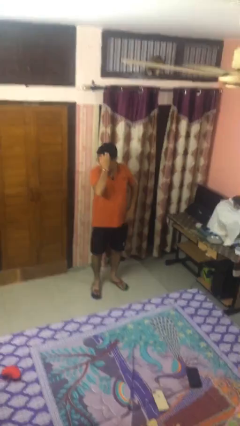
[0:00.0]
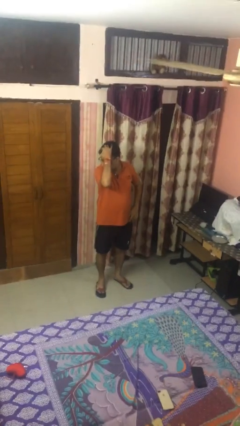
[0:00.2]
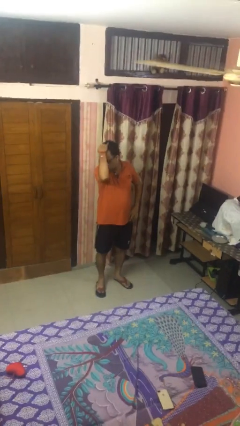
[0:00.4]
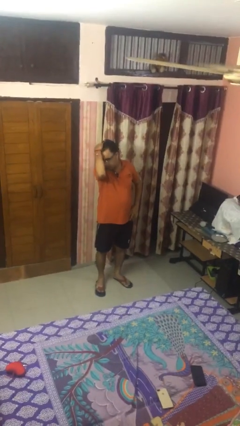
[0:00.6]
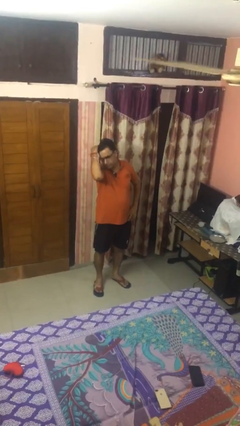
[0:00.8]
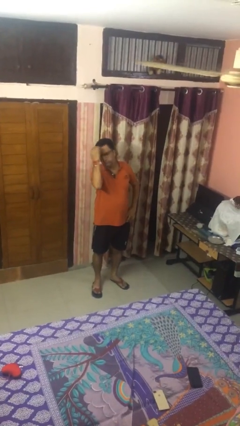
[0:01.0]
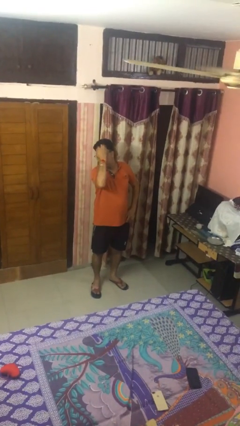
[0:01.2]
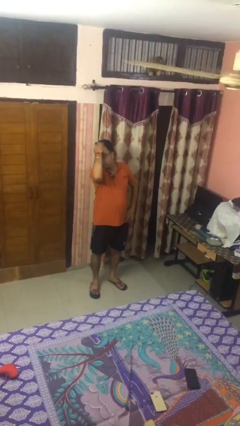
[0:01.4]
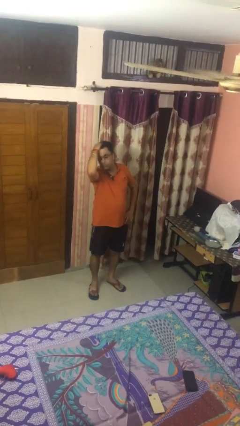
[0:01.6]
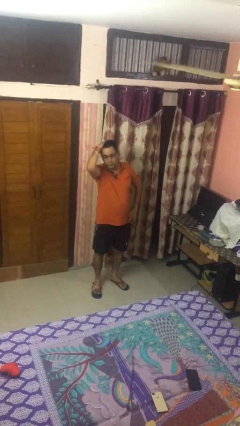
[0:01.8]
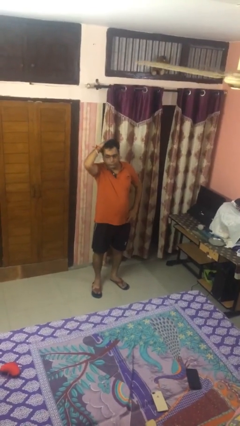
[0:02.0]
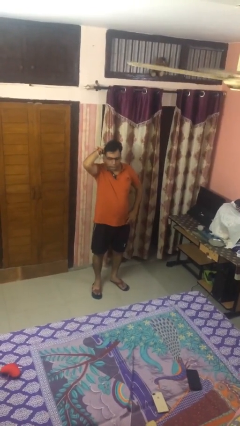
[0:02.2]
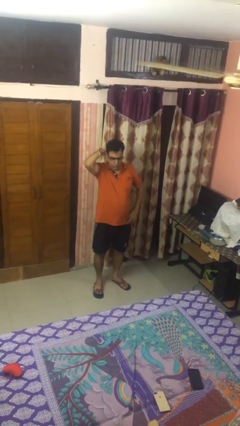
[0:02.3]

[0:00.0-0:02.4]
person strokes hair

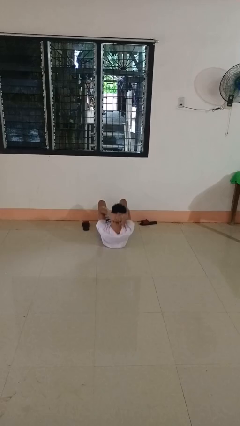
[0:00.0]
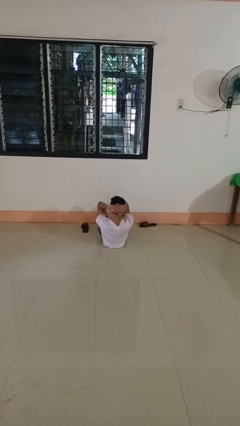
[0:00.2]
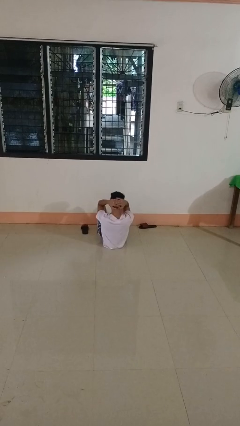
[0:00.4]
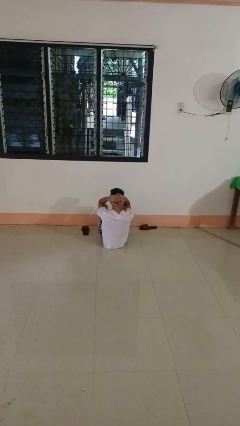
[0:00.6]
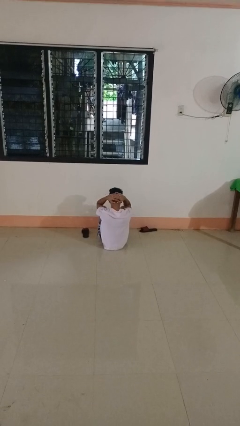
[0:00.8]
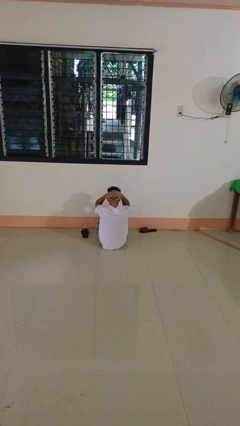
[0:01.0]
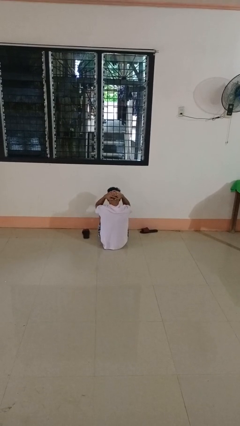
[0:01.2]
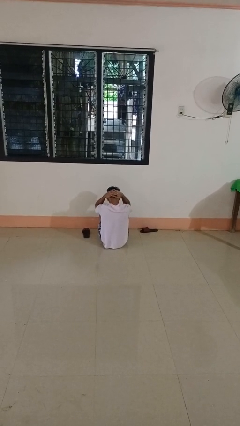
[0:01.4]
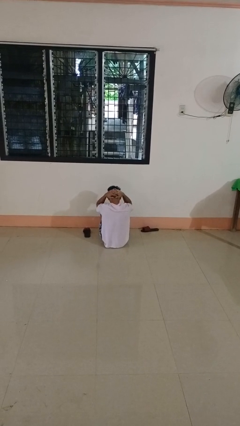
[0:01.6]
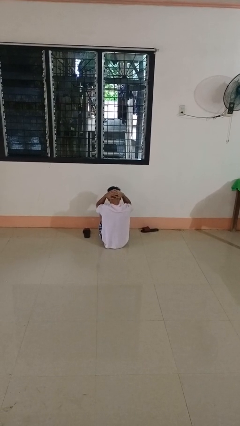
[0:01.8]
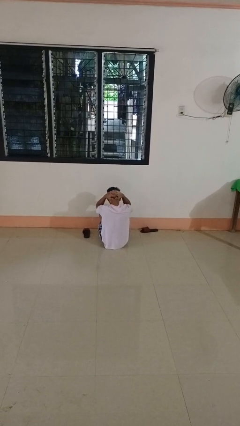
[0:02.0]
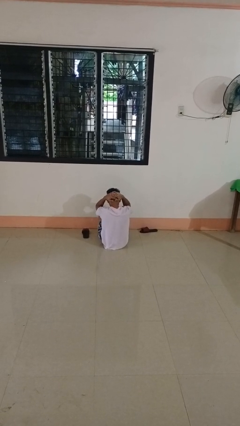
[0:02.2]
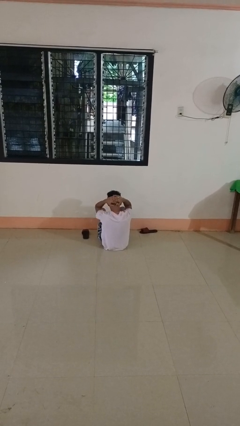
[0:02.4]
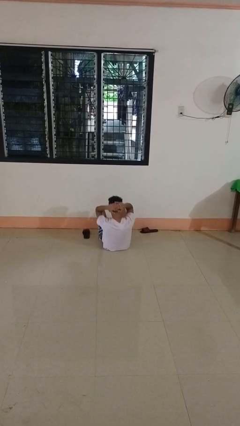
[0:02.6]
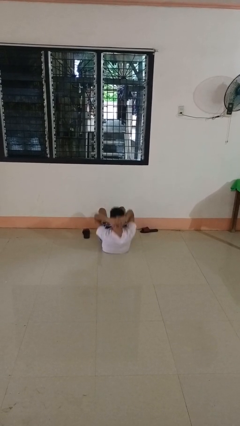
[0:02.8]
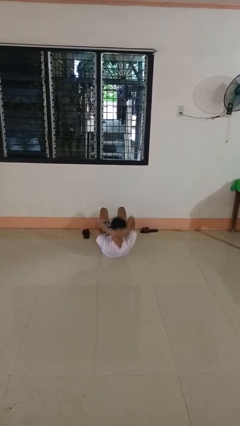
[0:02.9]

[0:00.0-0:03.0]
person exercises with situp

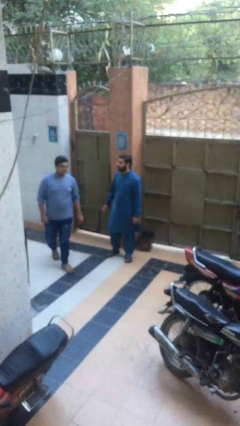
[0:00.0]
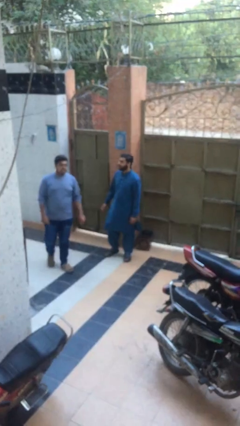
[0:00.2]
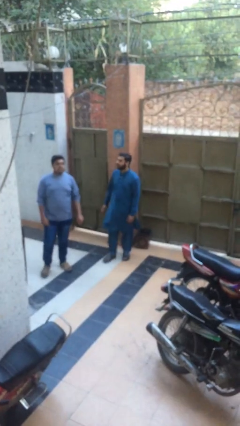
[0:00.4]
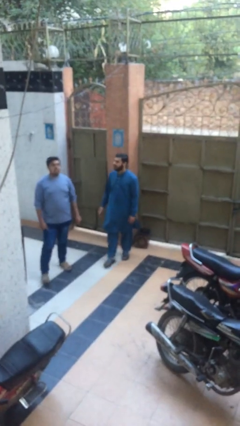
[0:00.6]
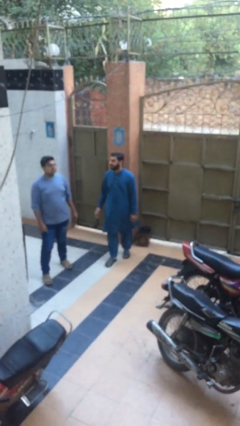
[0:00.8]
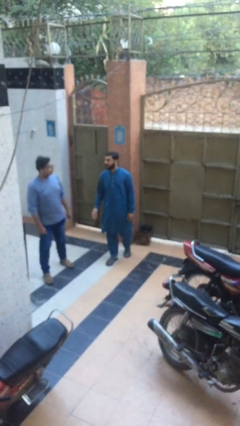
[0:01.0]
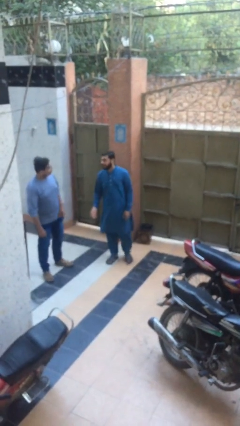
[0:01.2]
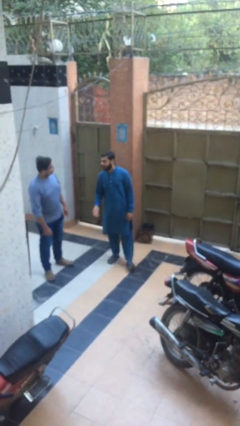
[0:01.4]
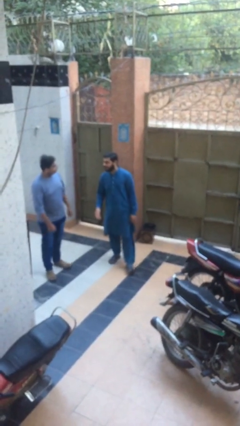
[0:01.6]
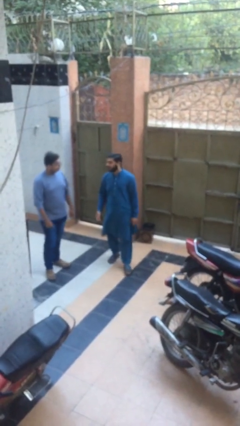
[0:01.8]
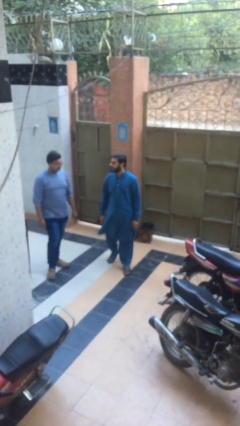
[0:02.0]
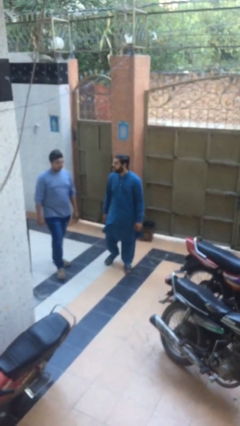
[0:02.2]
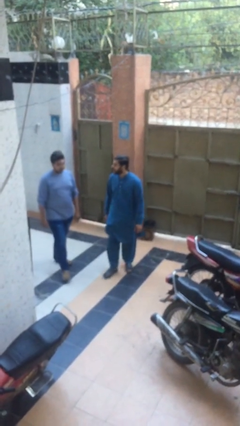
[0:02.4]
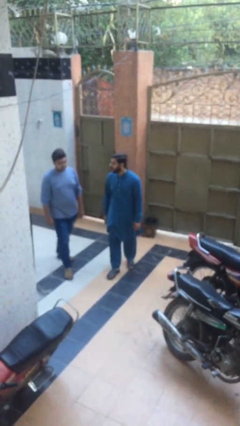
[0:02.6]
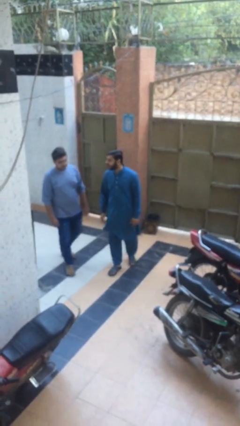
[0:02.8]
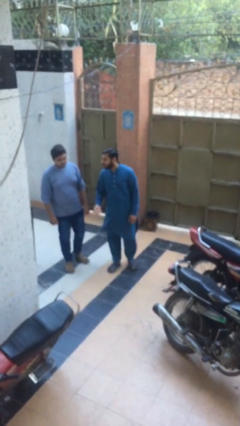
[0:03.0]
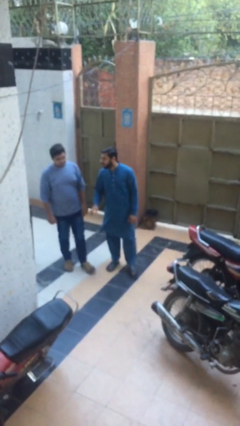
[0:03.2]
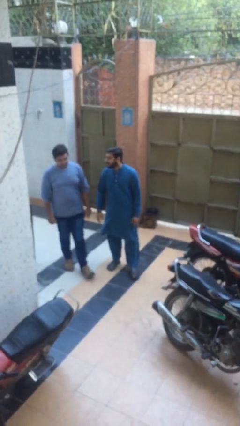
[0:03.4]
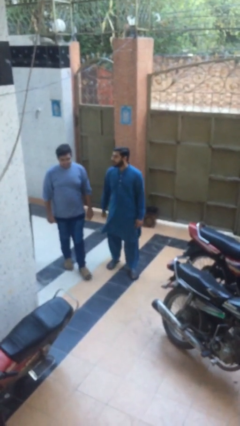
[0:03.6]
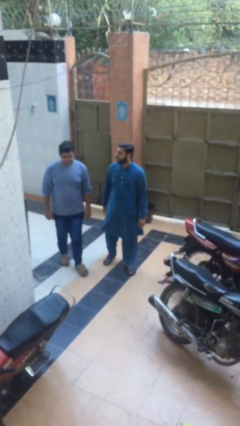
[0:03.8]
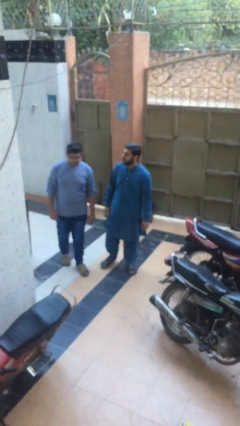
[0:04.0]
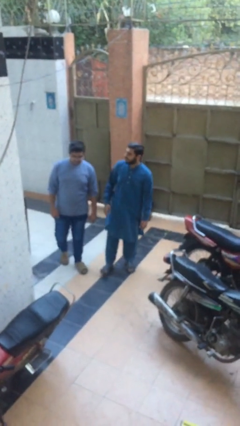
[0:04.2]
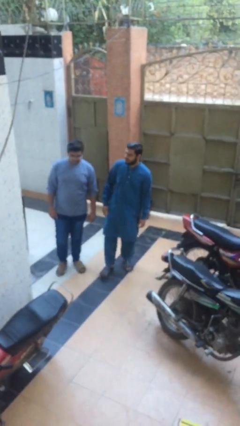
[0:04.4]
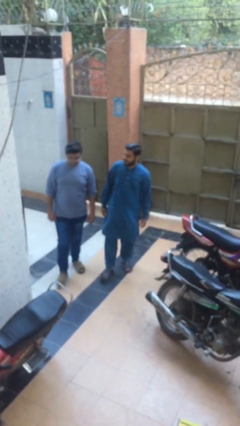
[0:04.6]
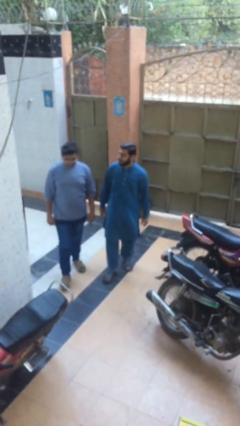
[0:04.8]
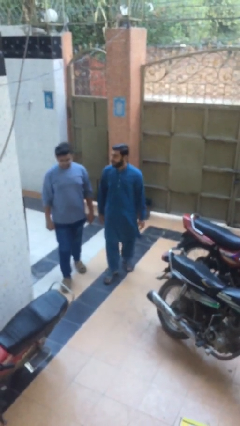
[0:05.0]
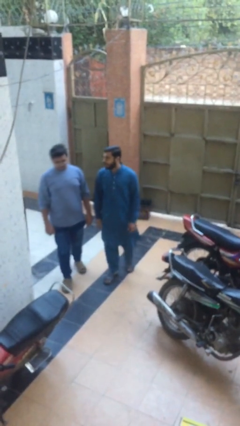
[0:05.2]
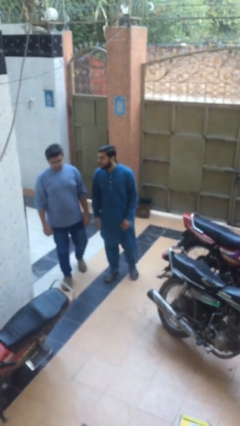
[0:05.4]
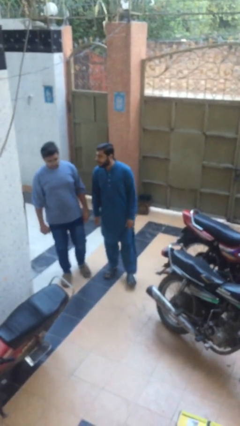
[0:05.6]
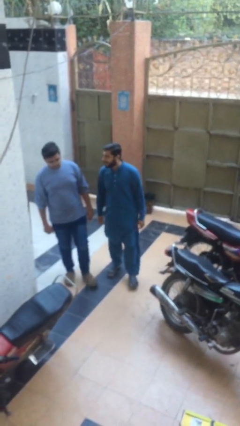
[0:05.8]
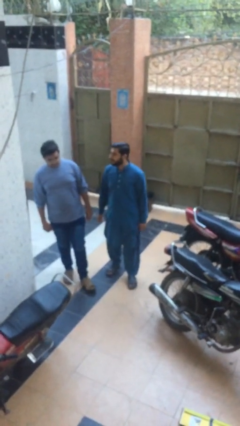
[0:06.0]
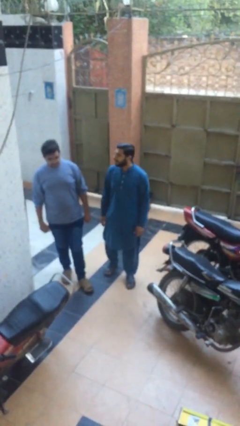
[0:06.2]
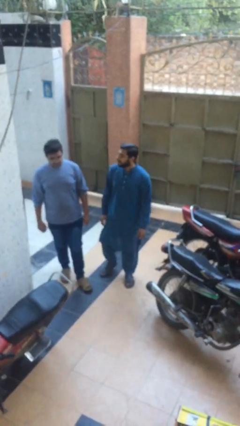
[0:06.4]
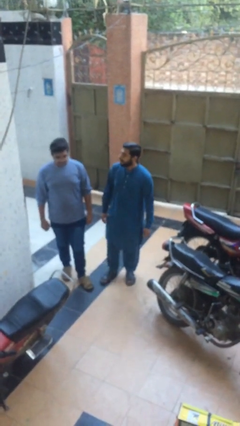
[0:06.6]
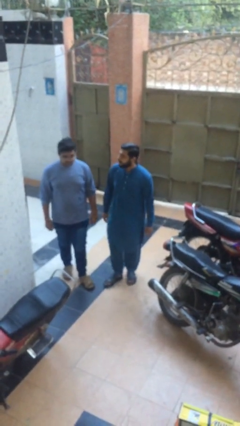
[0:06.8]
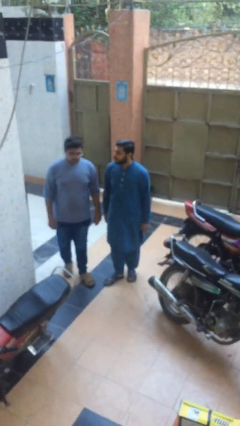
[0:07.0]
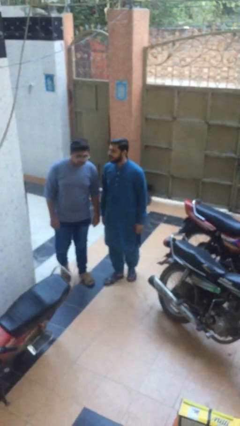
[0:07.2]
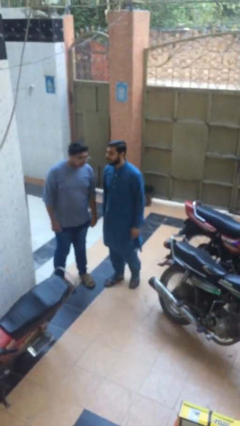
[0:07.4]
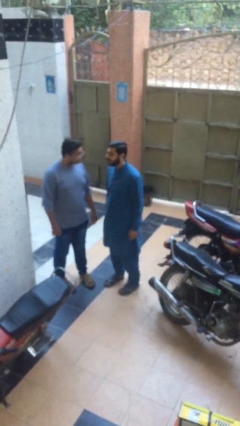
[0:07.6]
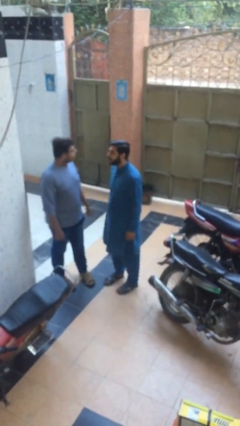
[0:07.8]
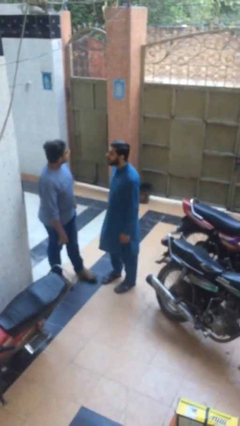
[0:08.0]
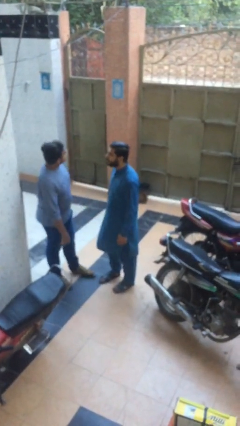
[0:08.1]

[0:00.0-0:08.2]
person talks to person

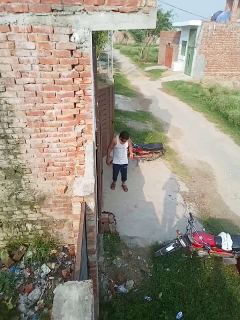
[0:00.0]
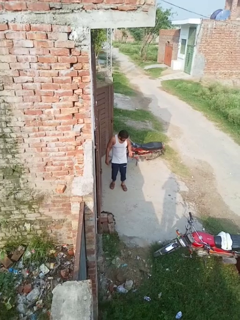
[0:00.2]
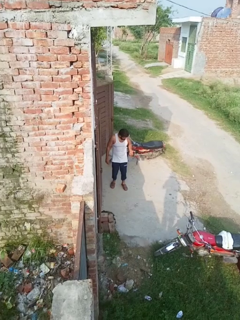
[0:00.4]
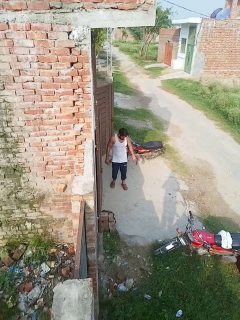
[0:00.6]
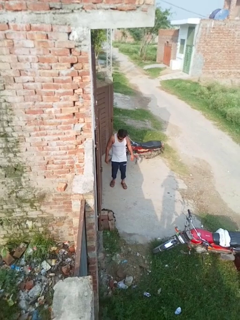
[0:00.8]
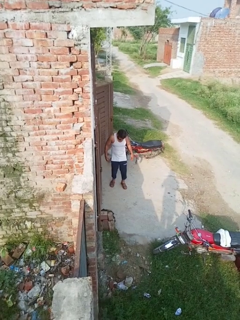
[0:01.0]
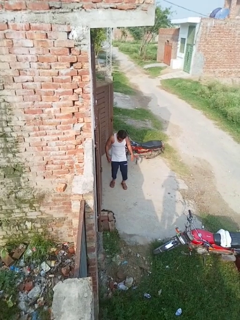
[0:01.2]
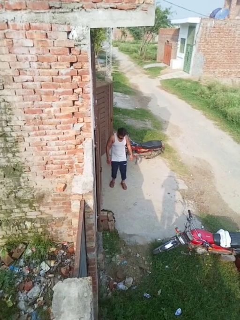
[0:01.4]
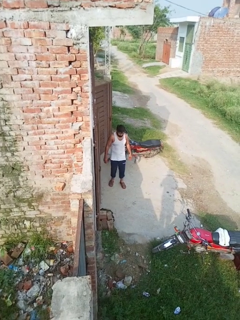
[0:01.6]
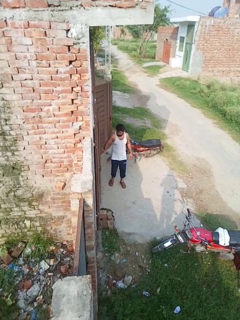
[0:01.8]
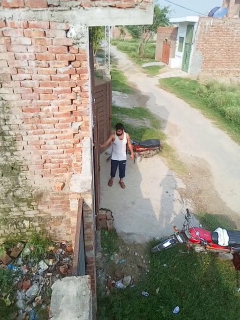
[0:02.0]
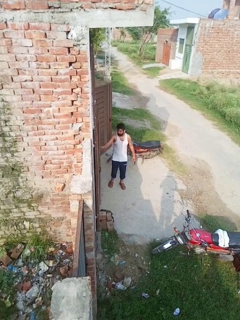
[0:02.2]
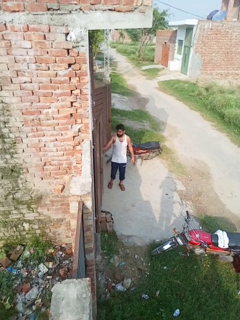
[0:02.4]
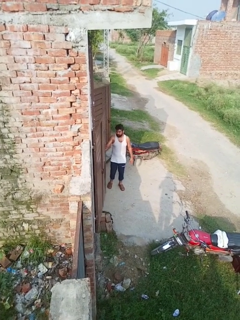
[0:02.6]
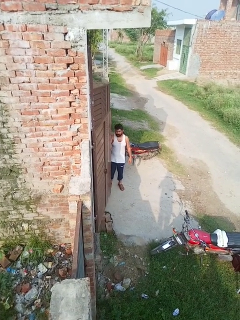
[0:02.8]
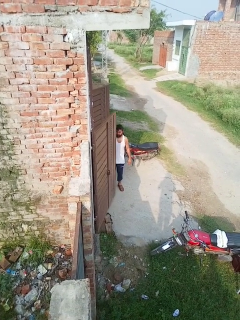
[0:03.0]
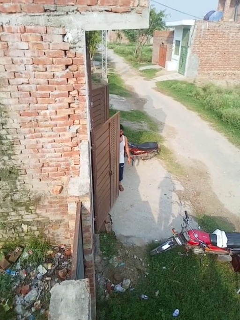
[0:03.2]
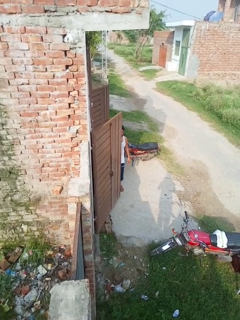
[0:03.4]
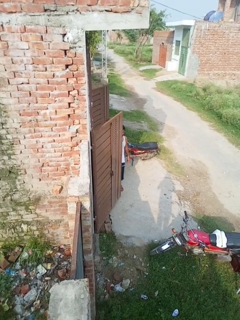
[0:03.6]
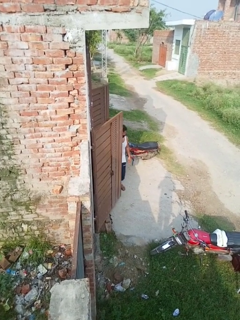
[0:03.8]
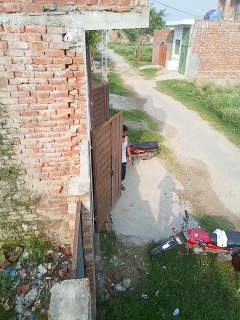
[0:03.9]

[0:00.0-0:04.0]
person opens facility door

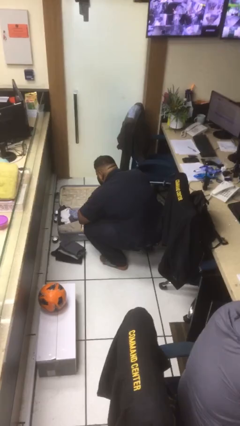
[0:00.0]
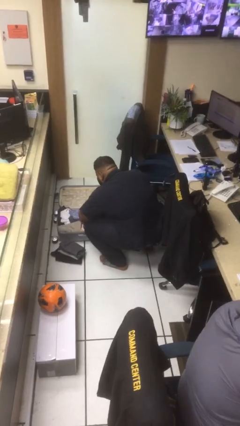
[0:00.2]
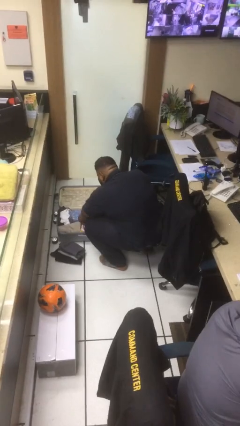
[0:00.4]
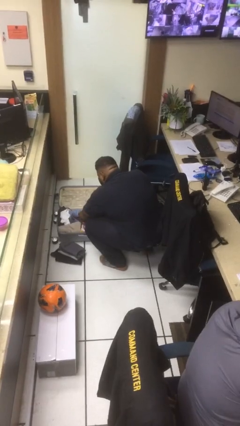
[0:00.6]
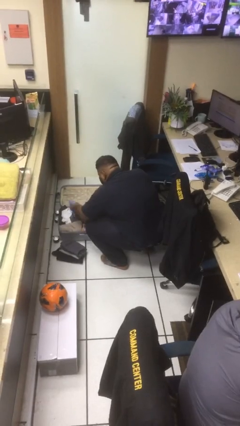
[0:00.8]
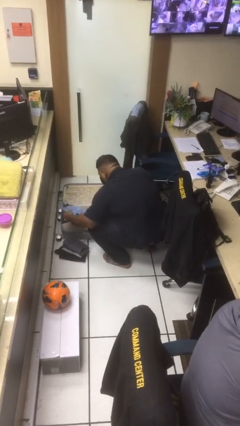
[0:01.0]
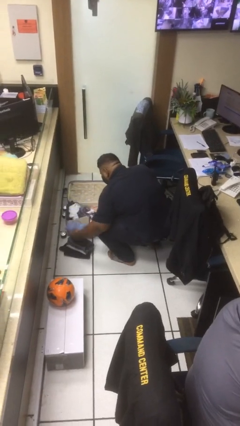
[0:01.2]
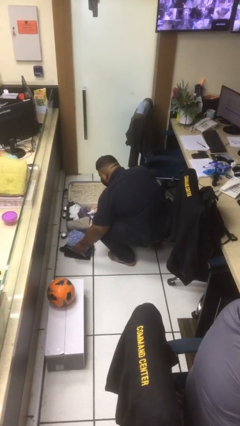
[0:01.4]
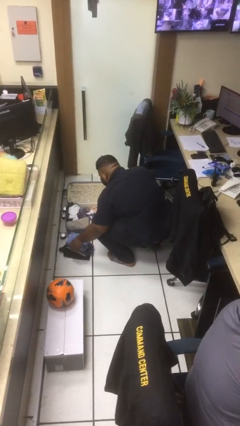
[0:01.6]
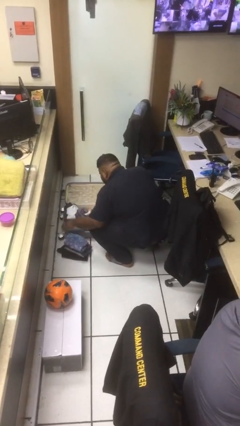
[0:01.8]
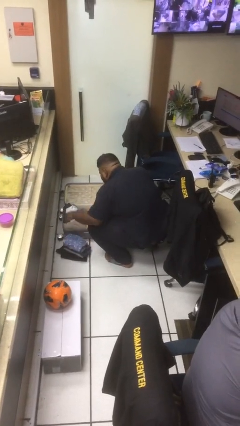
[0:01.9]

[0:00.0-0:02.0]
person unloads clothes from suitcase
